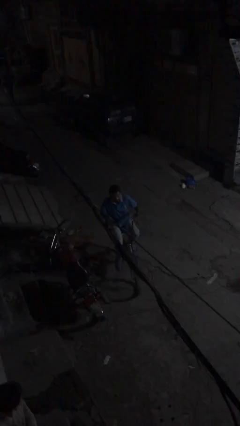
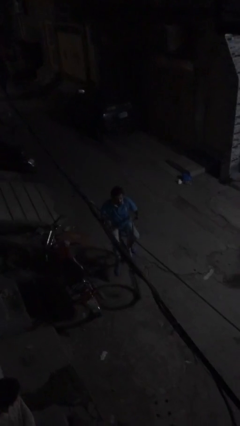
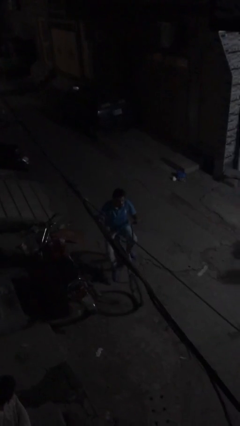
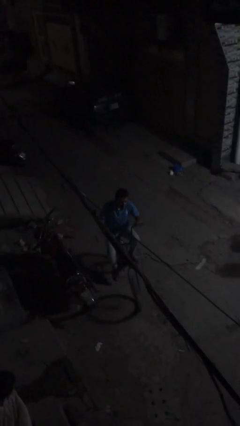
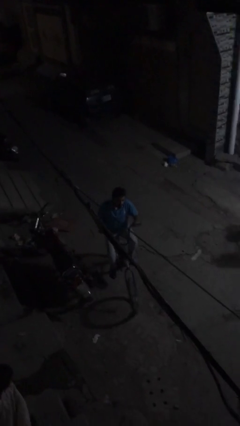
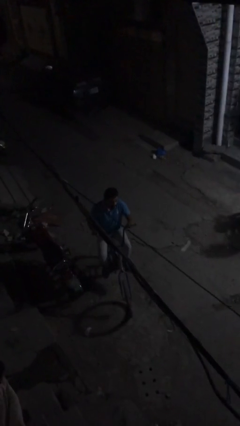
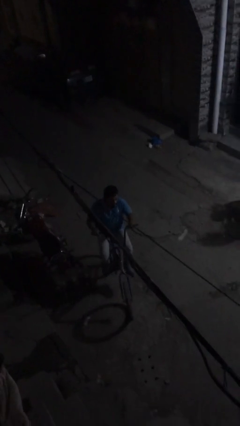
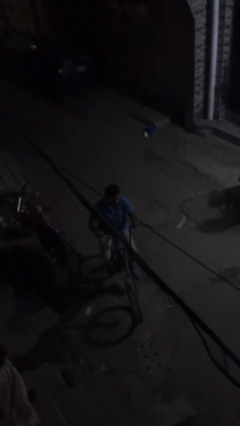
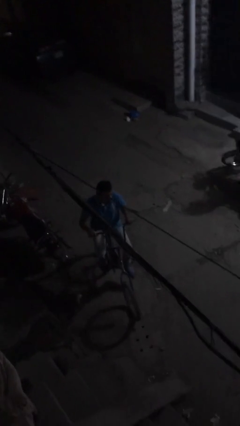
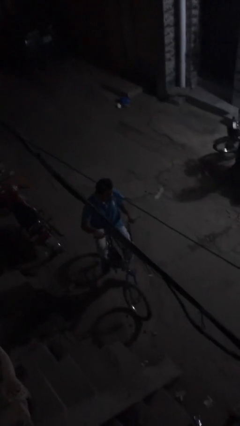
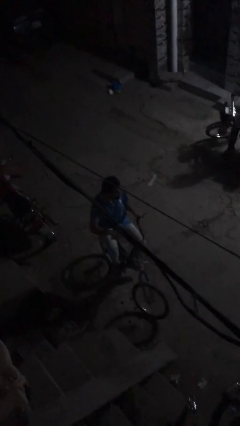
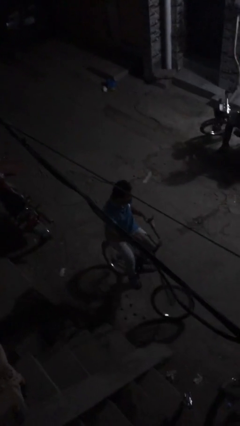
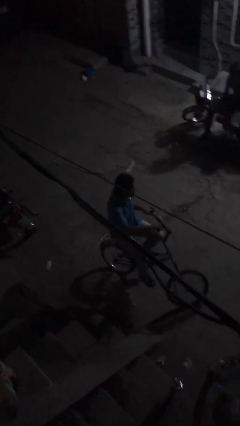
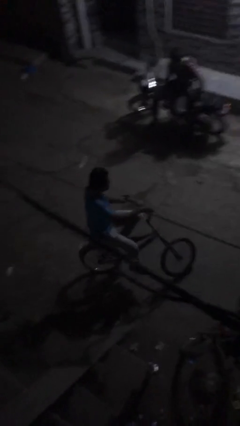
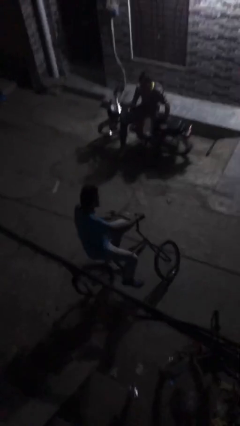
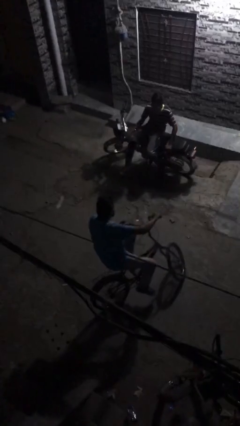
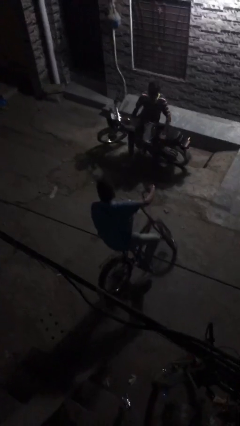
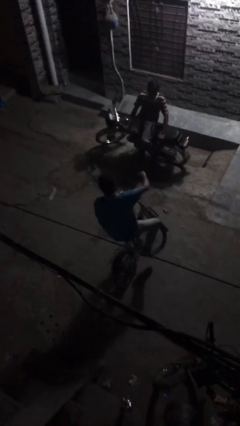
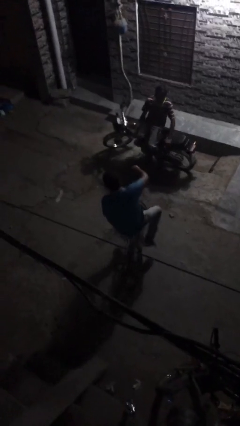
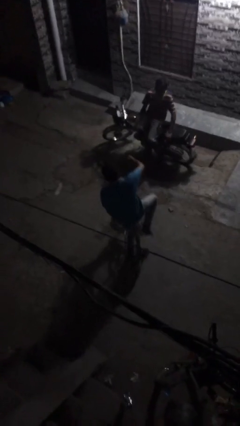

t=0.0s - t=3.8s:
person rides bicycle

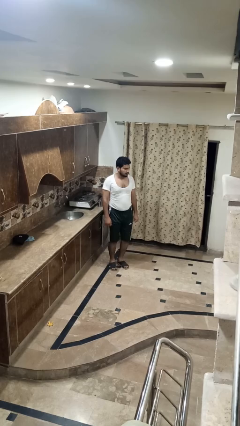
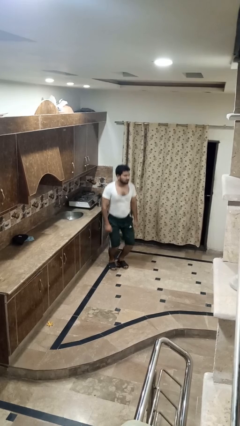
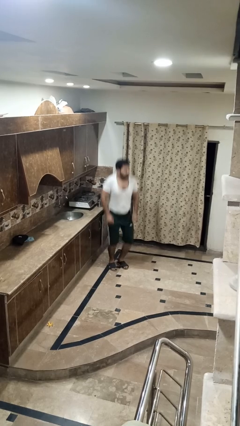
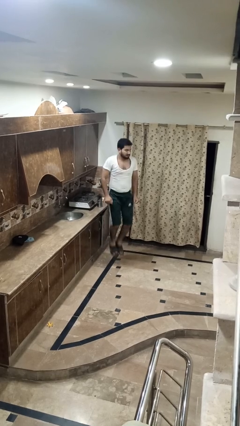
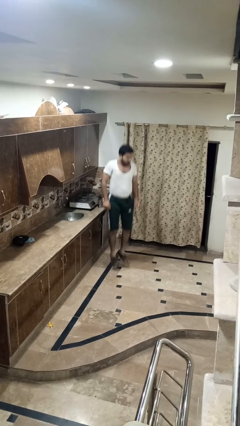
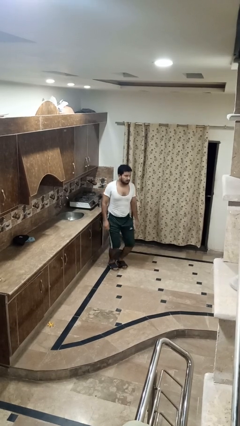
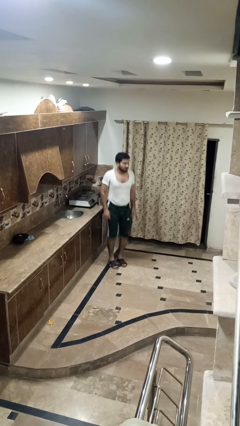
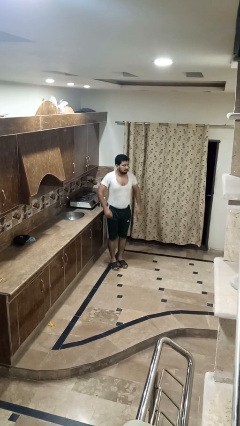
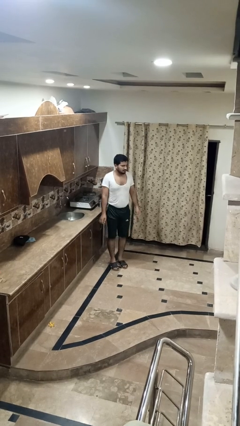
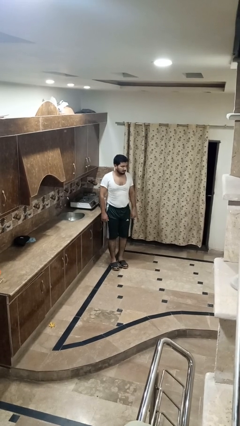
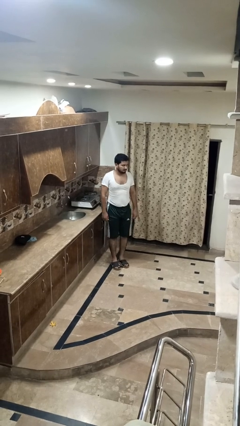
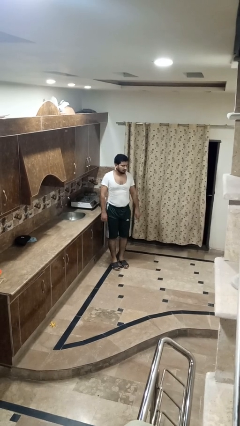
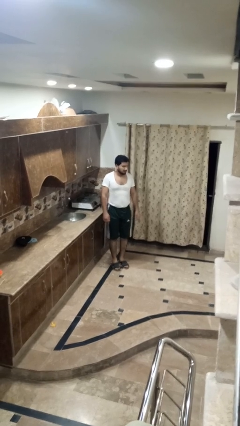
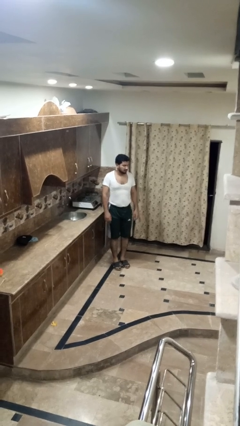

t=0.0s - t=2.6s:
person jumps

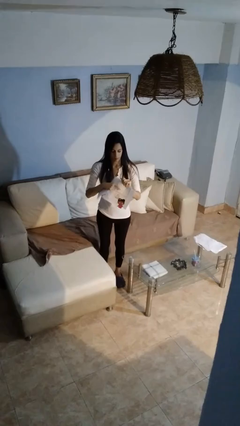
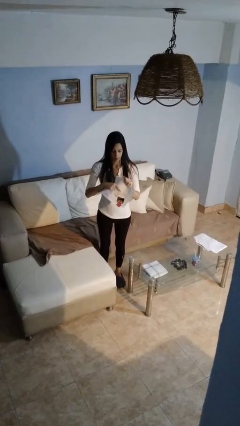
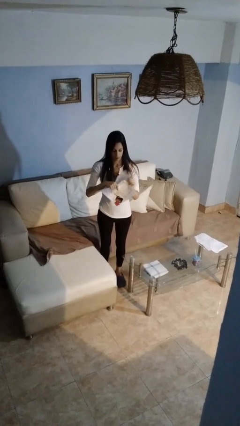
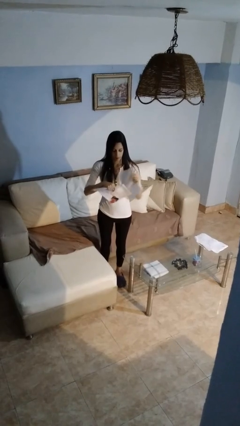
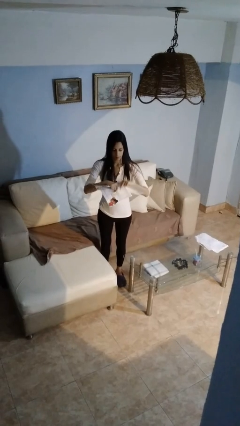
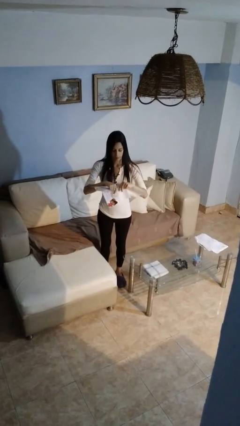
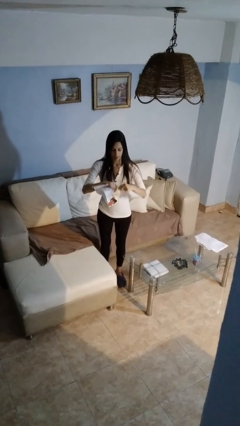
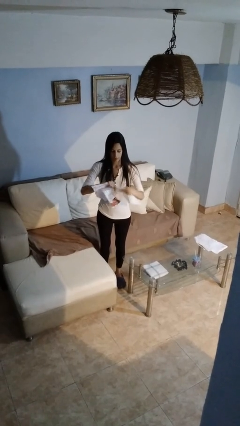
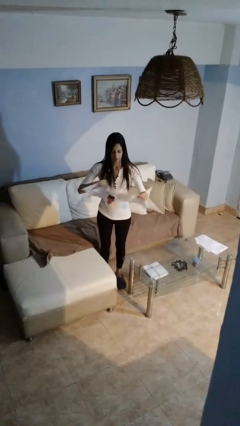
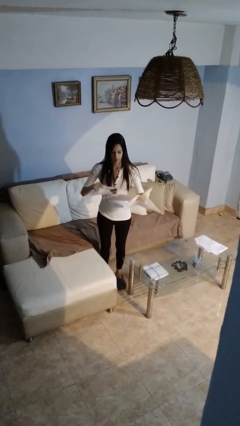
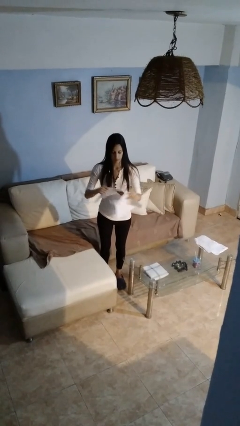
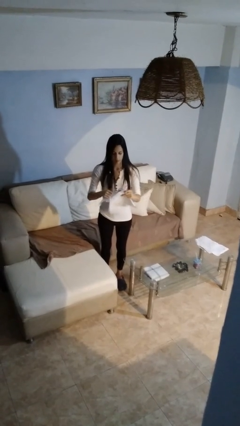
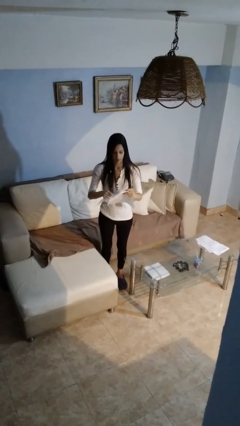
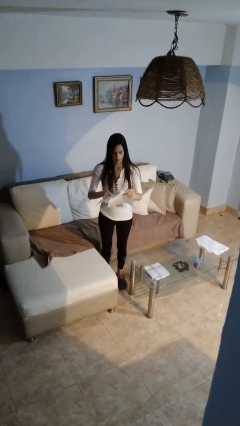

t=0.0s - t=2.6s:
person tears paper

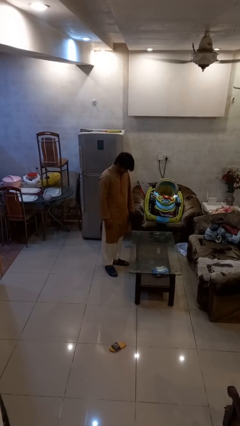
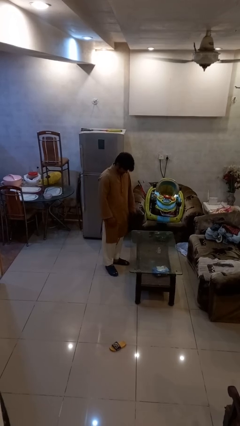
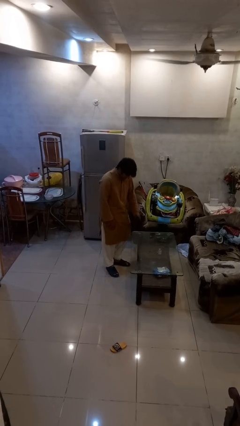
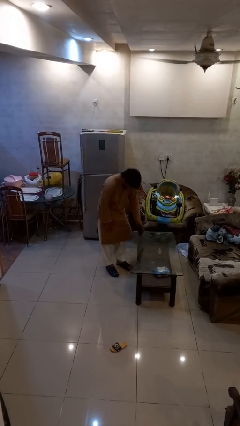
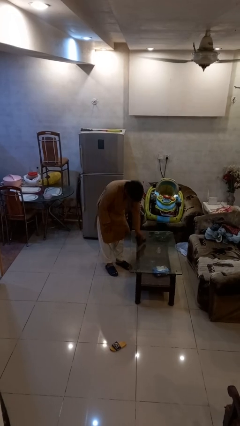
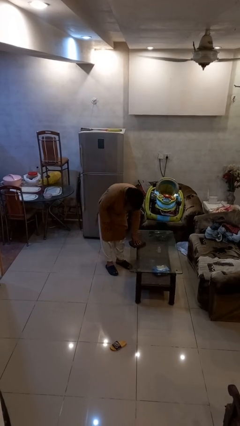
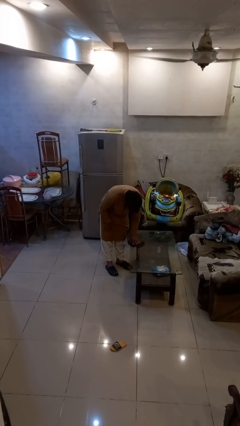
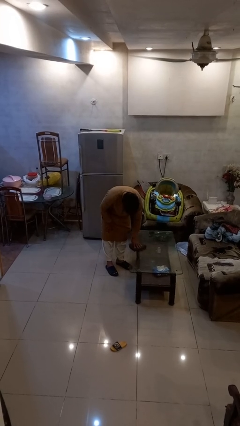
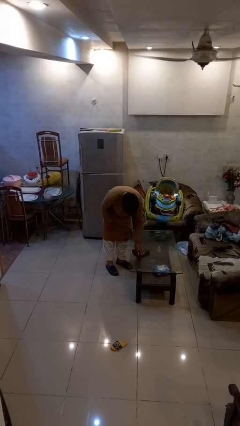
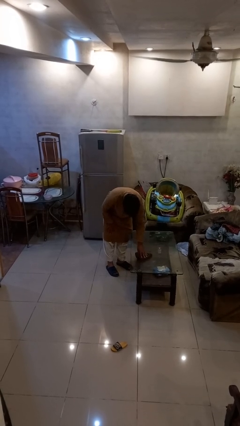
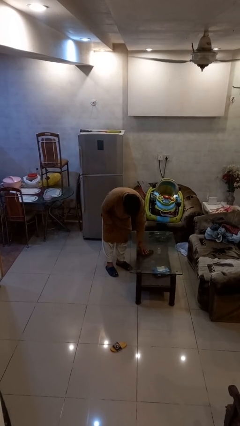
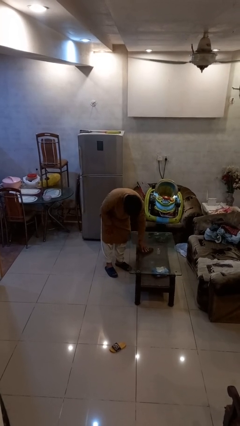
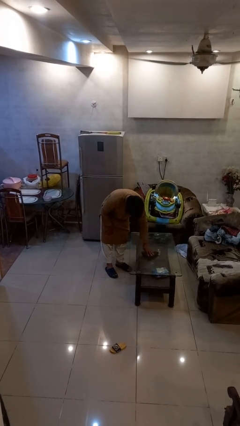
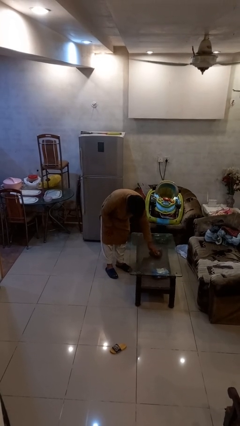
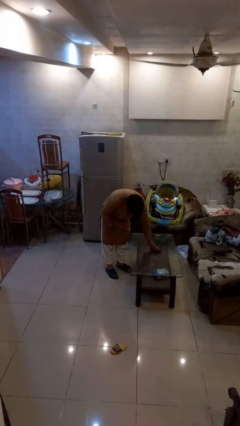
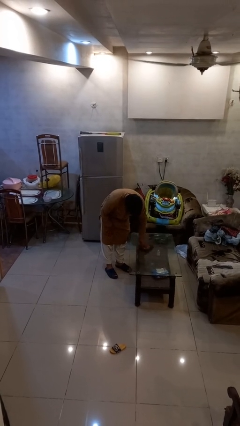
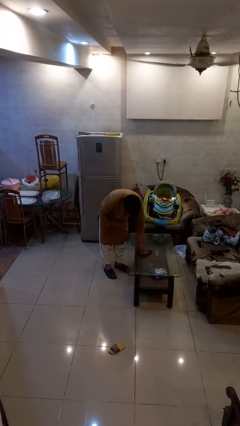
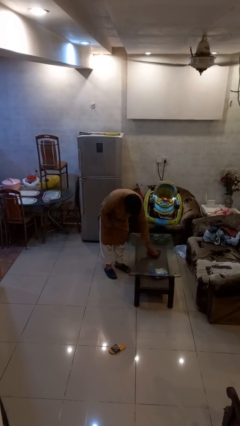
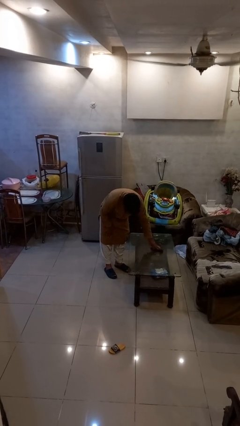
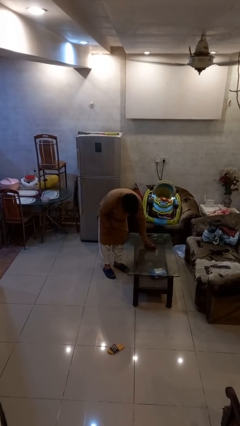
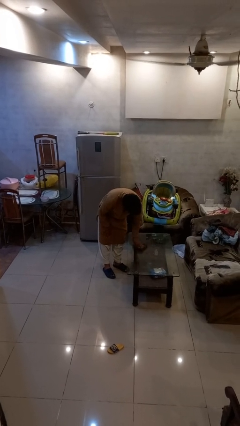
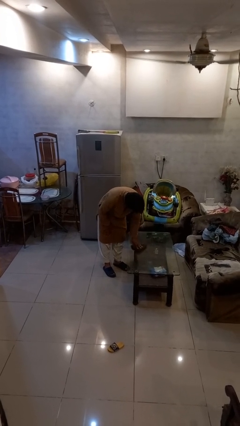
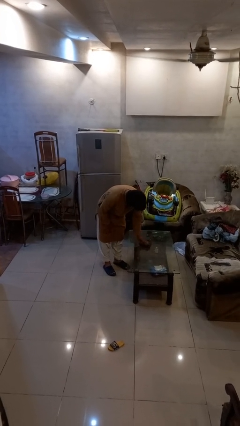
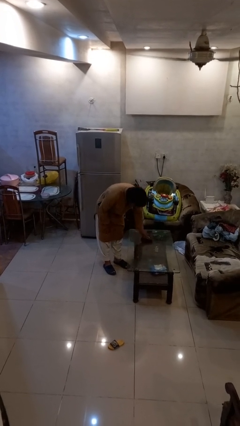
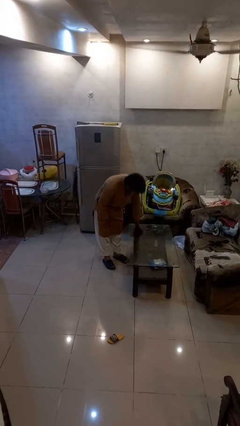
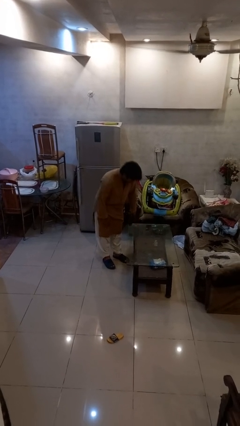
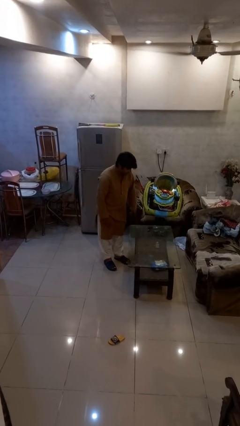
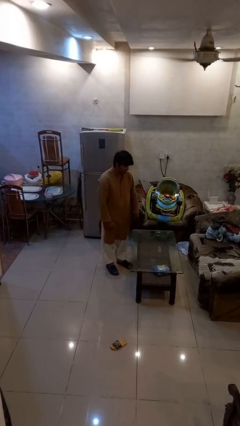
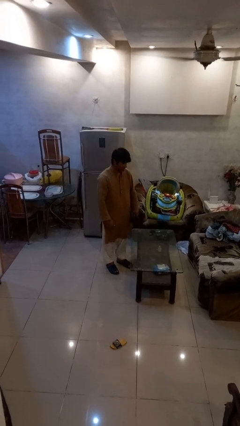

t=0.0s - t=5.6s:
person cleans table with rag

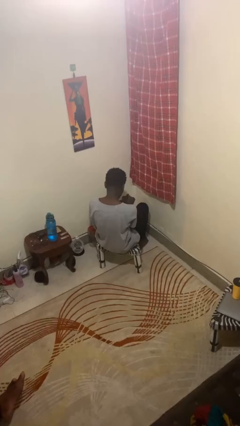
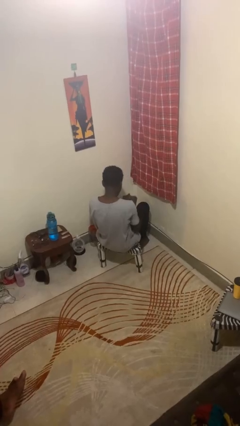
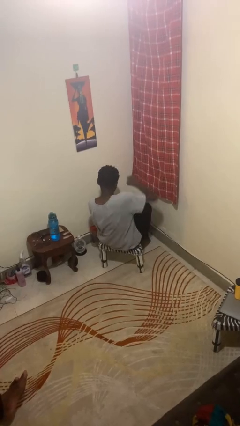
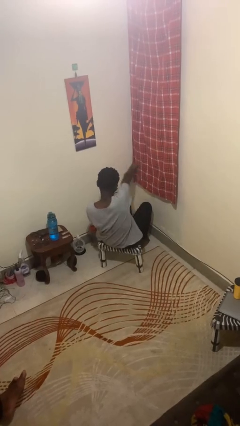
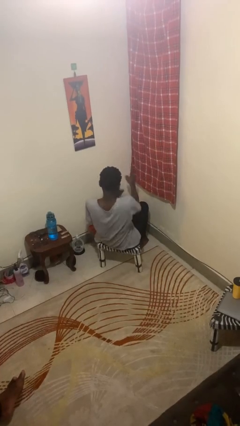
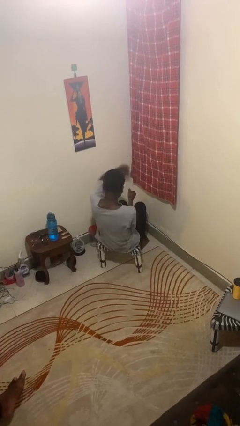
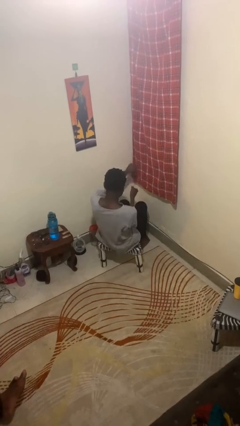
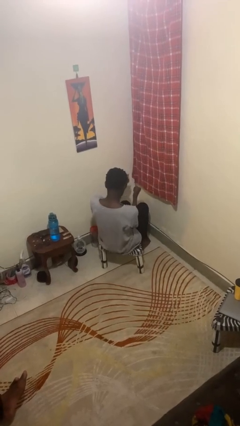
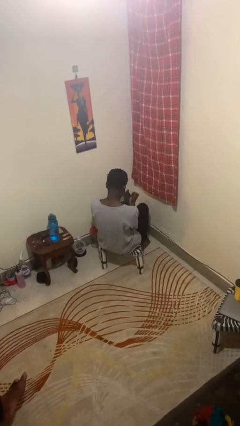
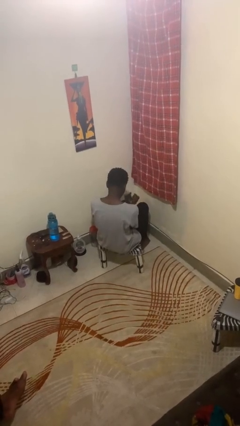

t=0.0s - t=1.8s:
person punches

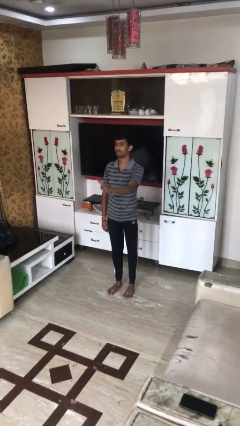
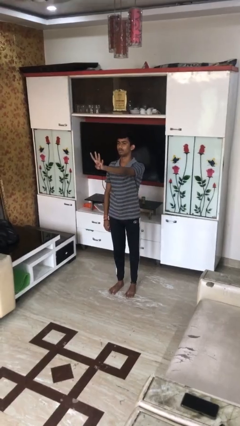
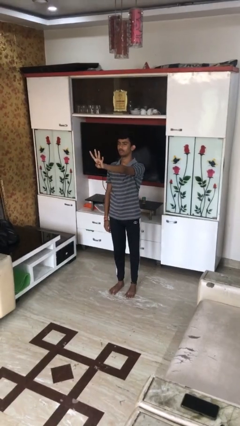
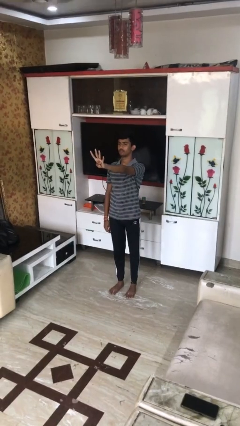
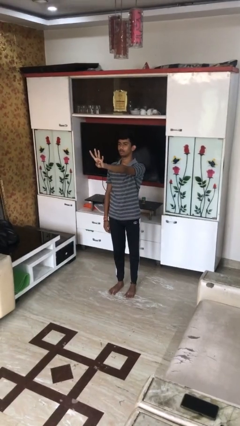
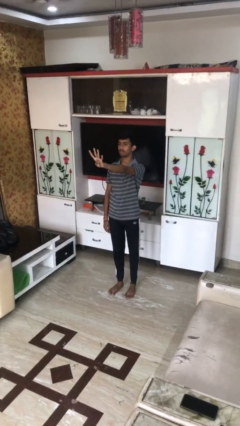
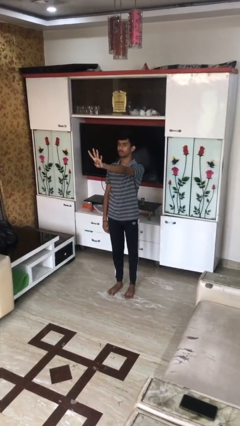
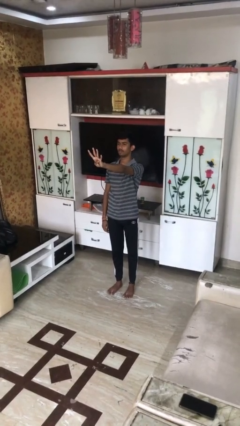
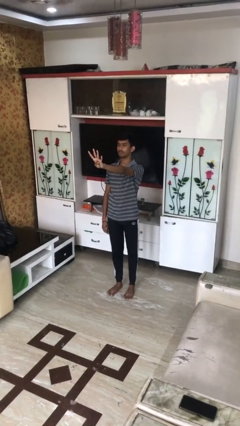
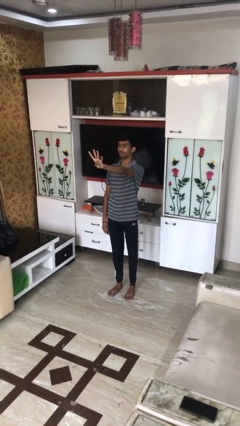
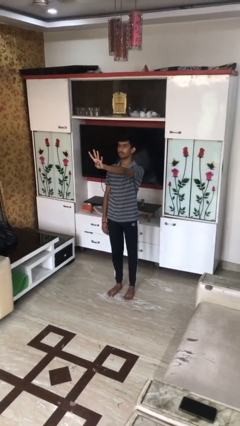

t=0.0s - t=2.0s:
person gestures number four
